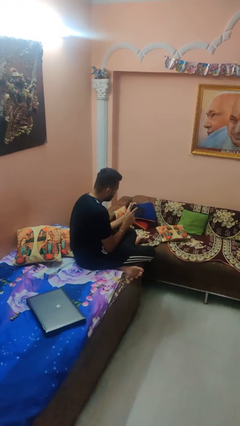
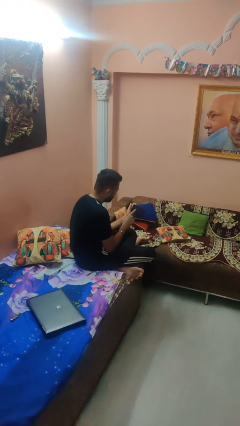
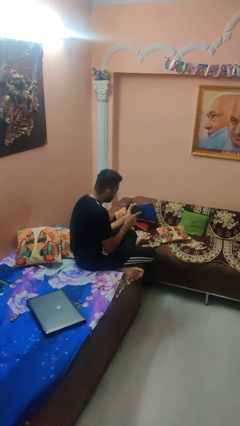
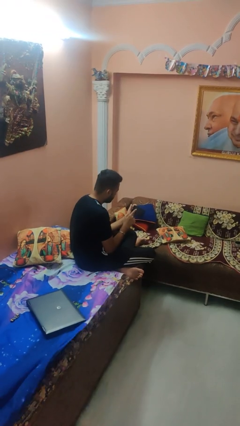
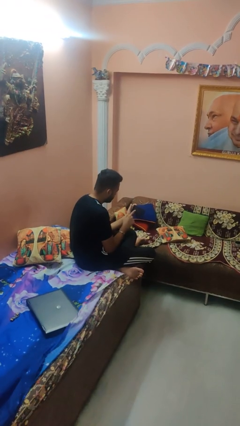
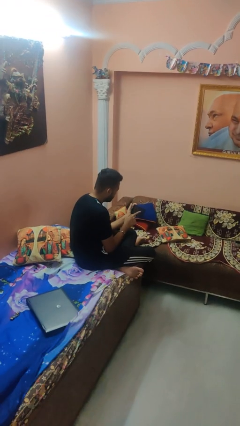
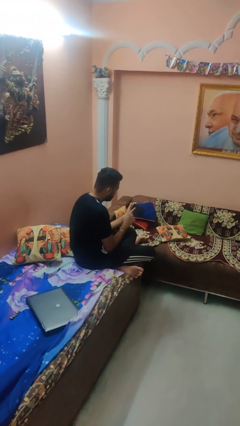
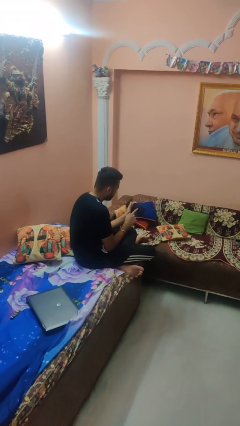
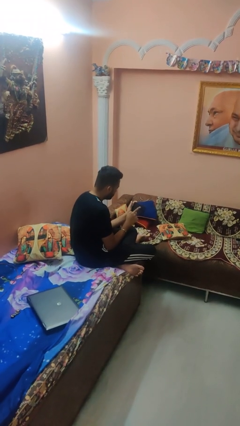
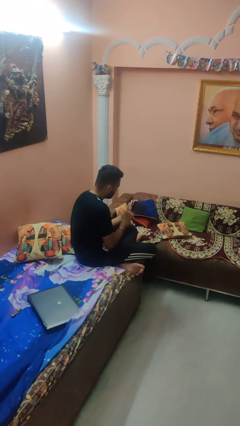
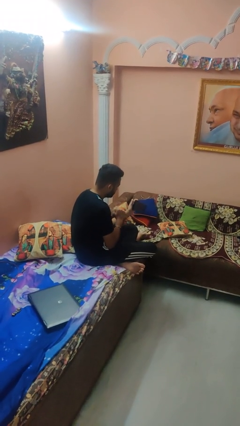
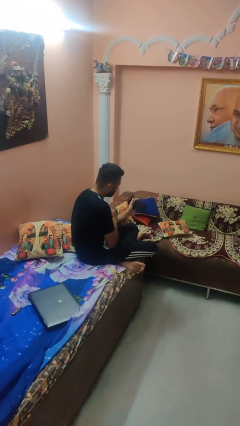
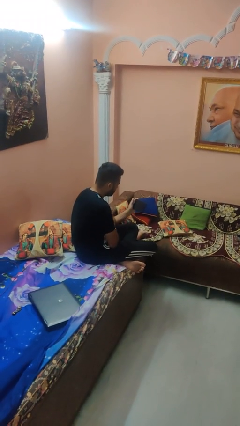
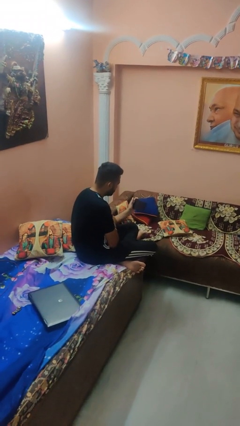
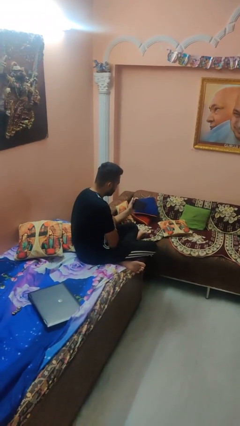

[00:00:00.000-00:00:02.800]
person interacts with tablet

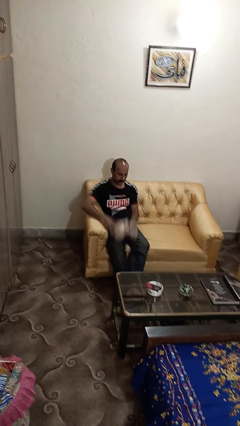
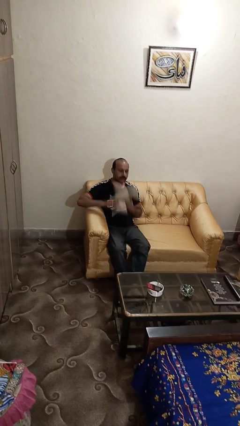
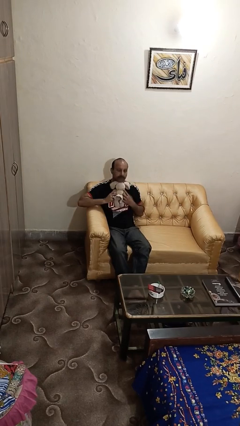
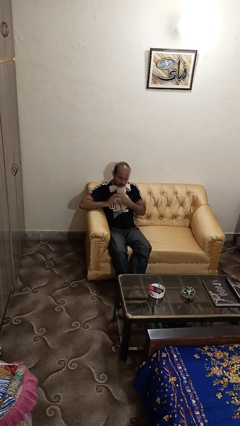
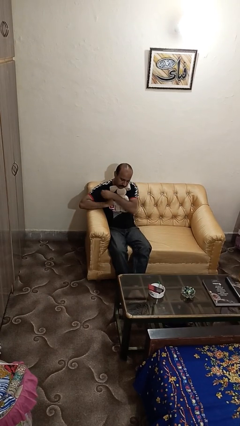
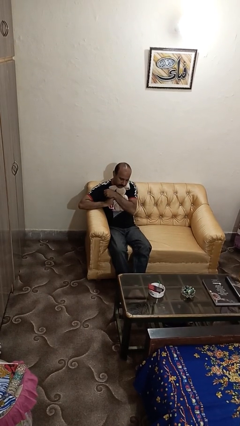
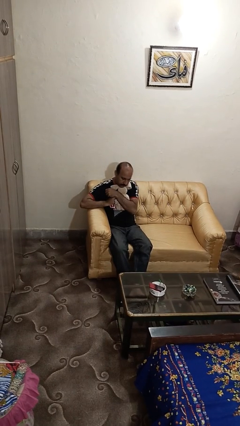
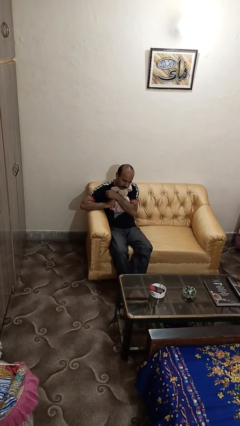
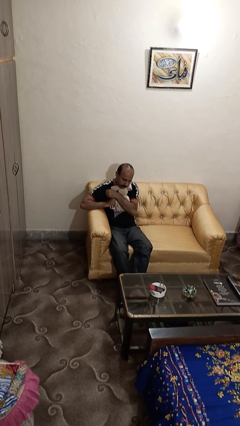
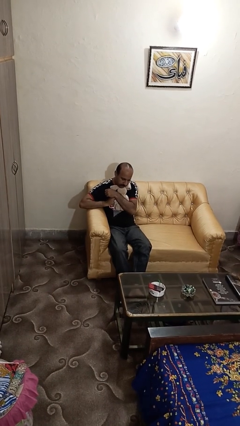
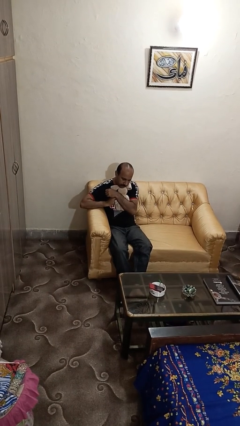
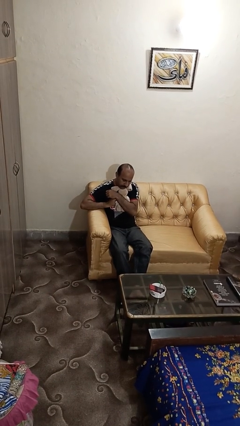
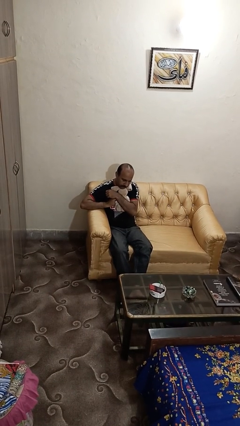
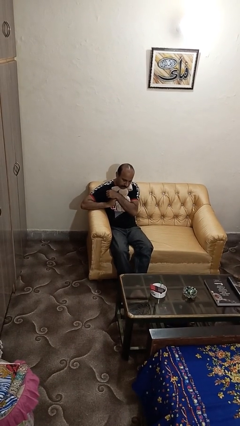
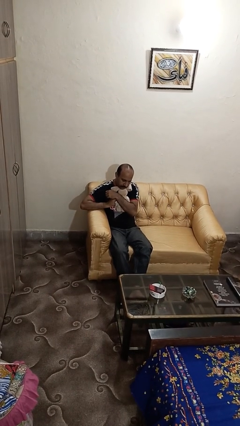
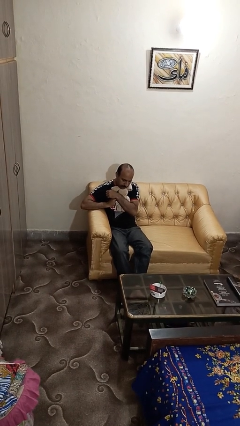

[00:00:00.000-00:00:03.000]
person hugs stuffed animal

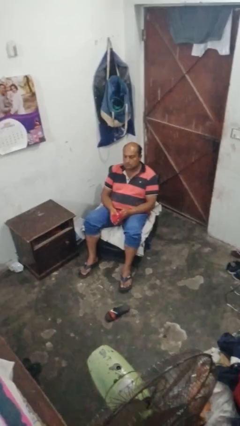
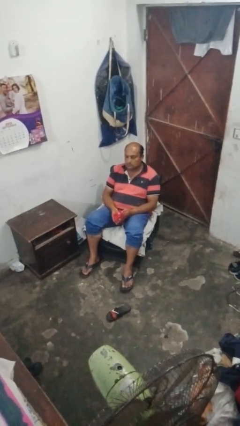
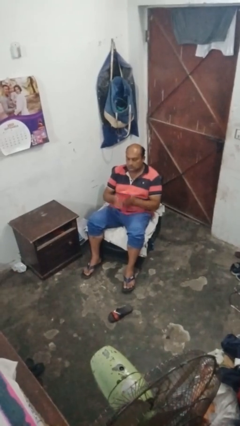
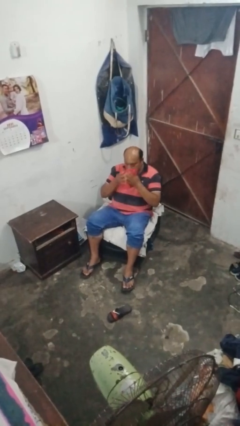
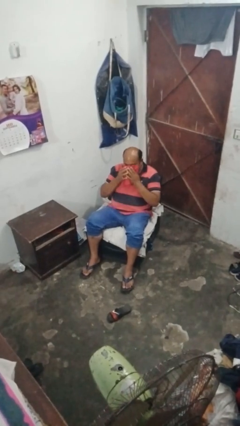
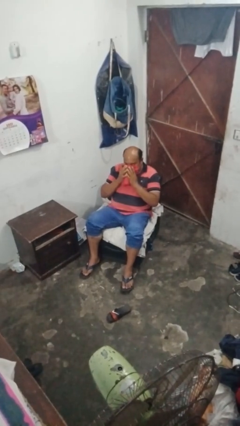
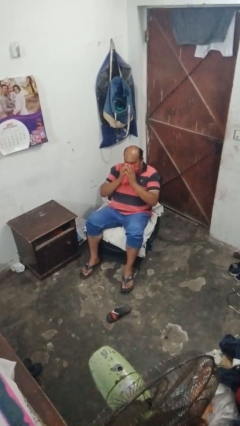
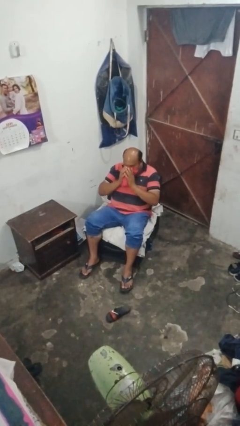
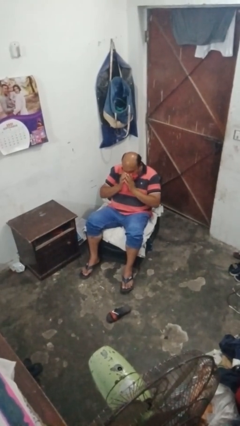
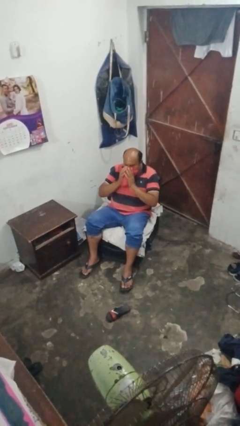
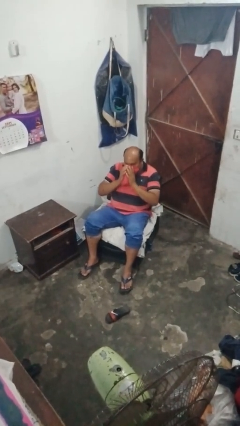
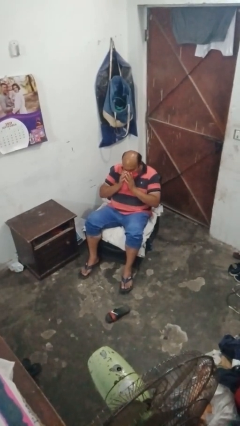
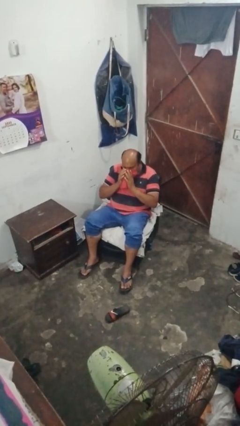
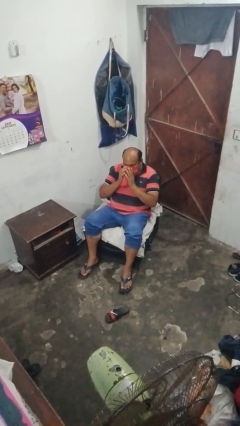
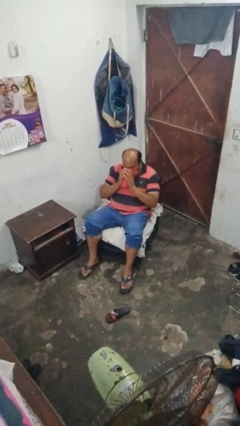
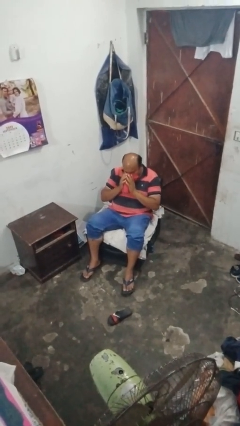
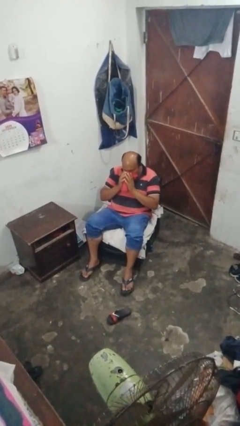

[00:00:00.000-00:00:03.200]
person blows nose

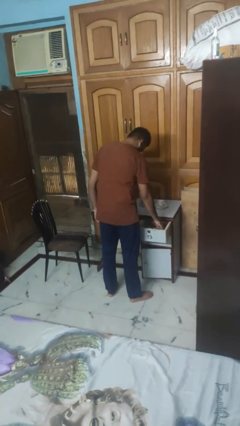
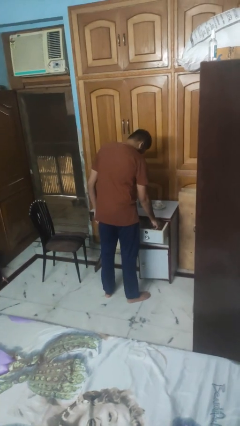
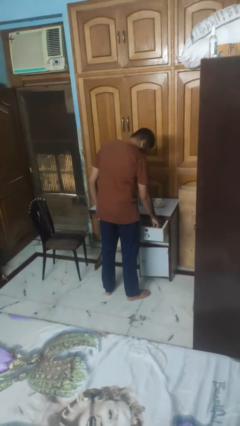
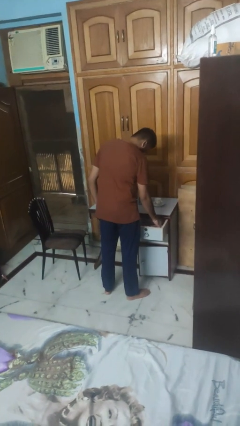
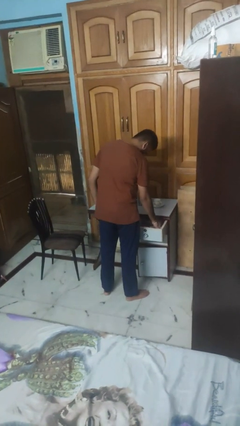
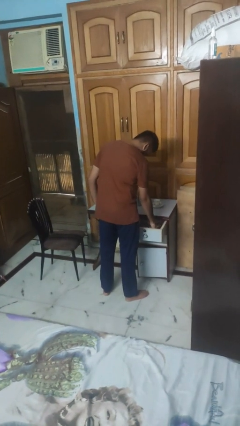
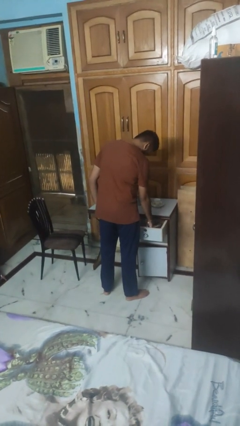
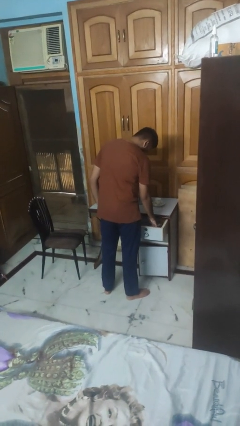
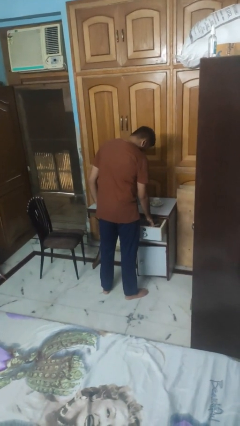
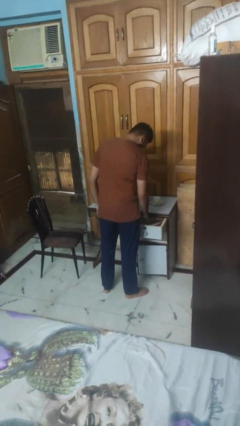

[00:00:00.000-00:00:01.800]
person searches in kitchen drawer

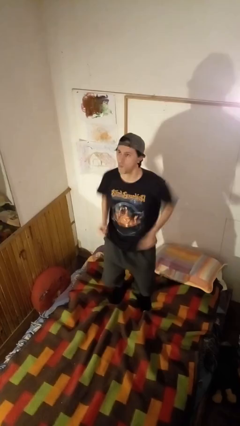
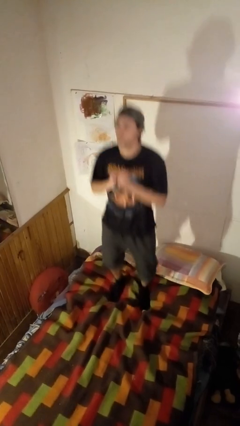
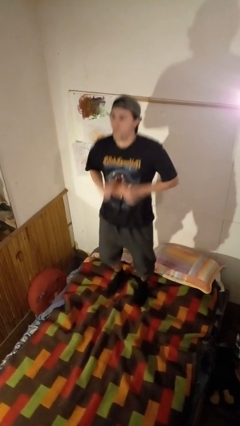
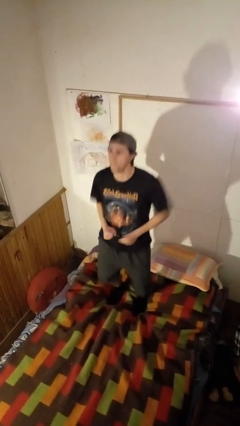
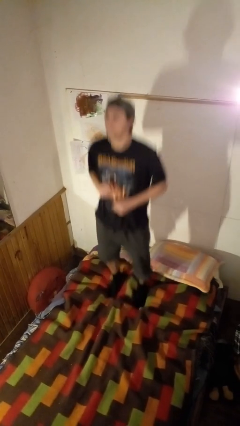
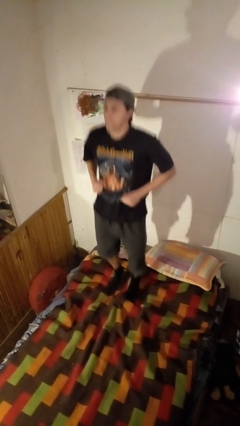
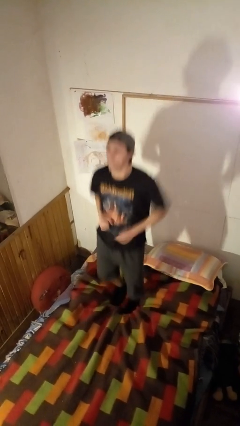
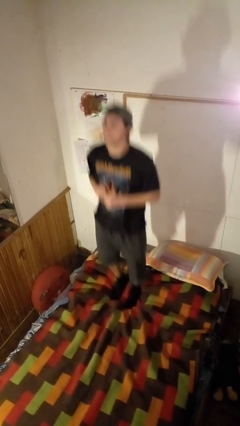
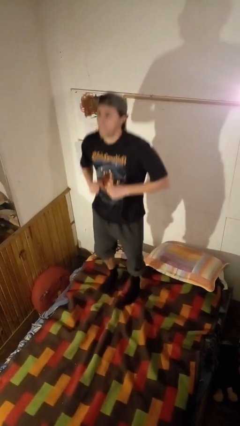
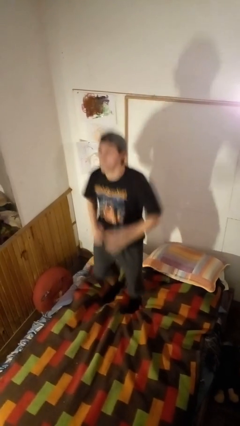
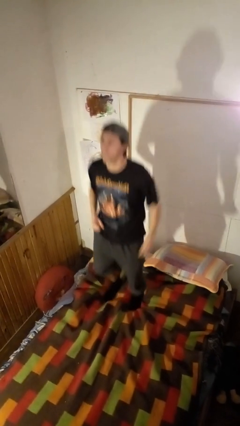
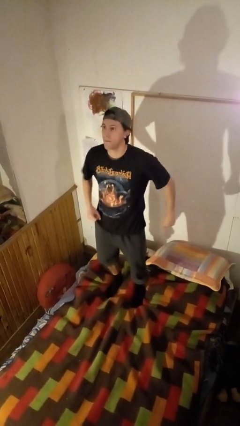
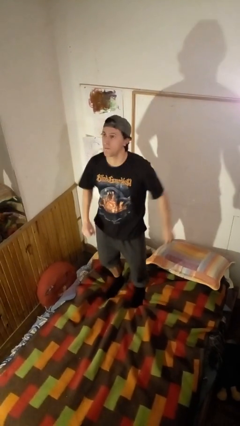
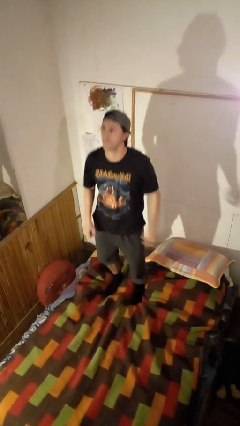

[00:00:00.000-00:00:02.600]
person jumps on bed

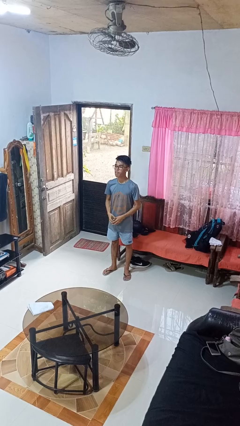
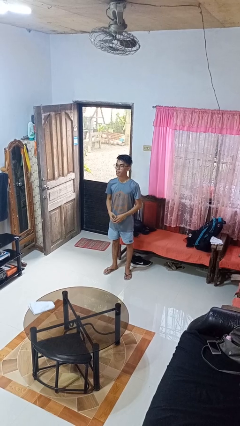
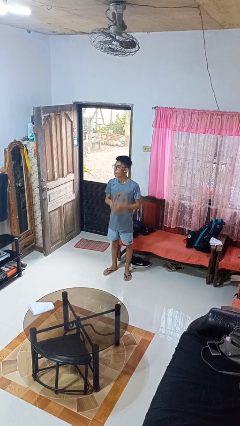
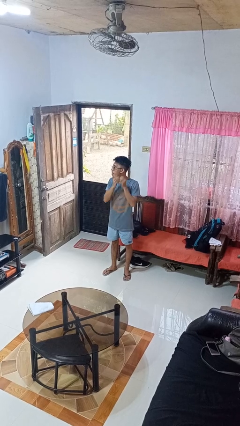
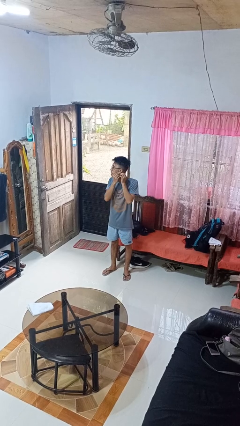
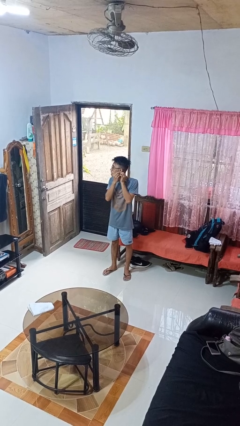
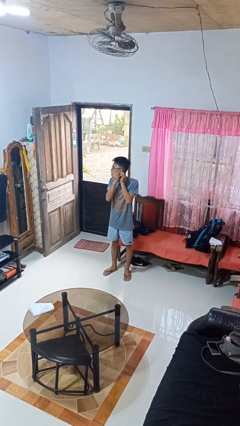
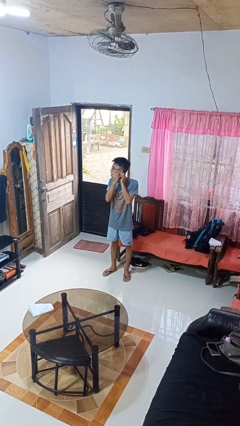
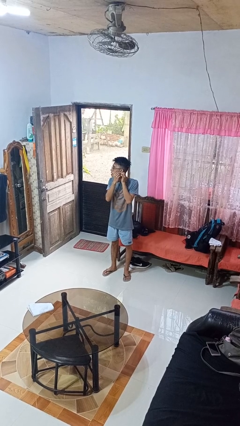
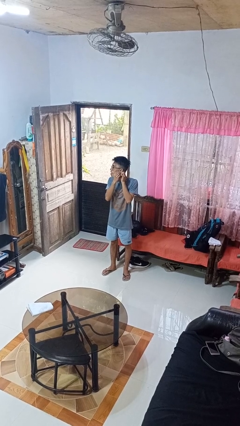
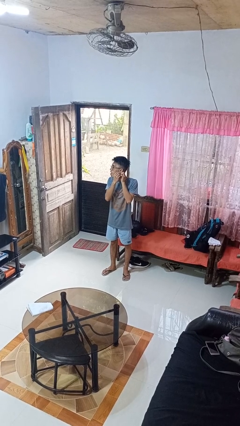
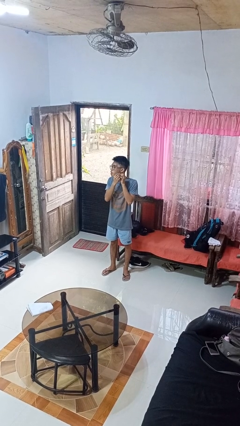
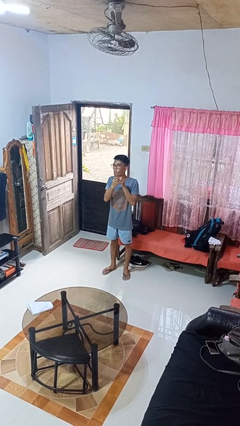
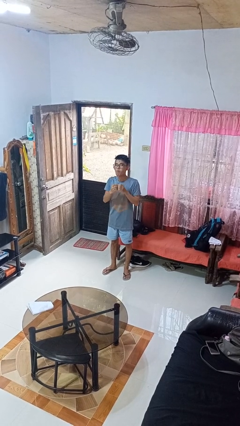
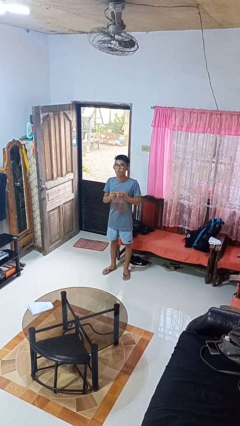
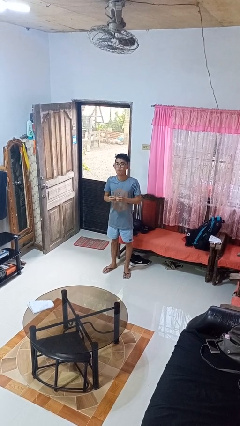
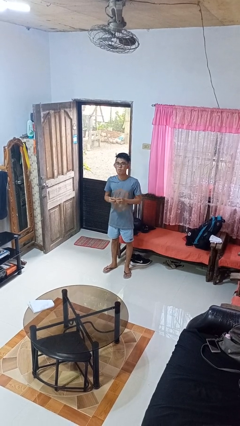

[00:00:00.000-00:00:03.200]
person takes off earrings

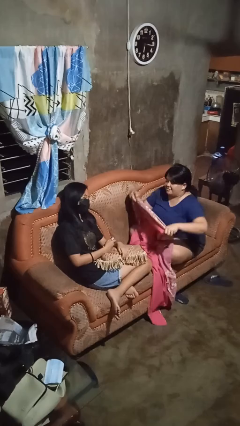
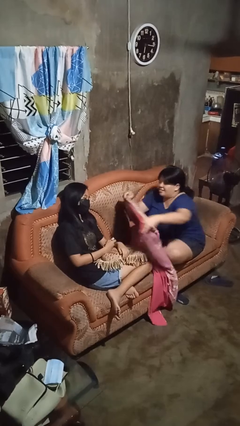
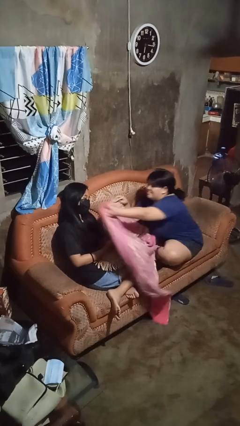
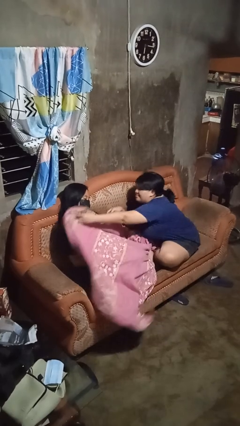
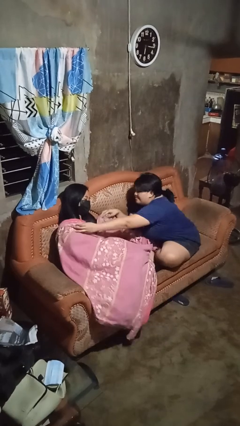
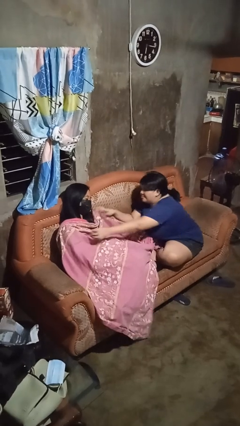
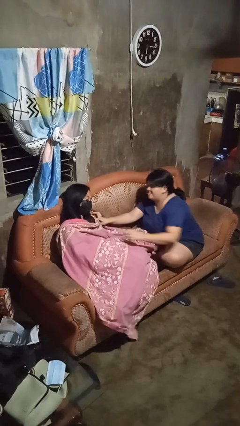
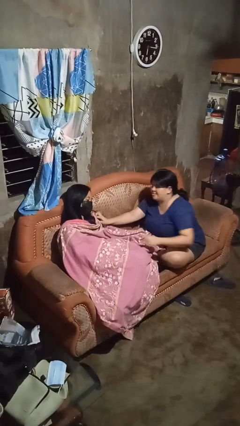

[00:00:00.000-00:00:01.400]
person covers friend with blanket
